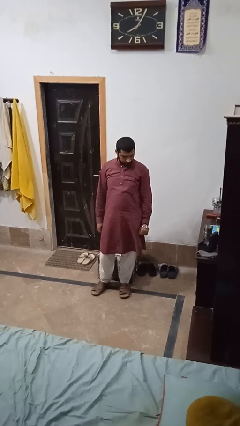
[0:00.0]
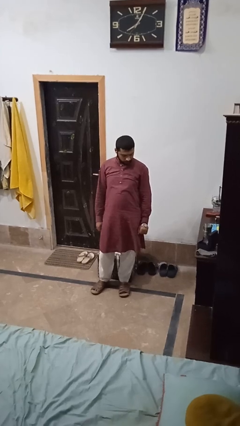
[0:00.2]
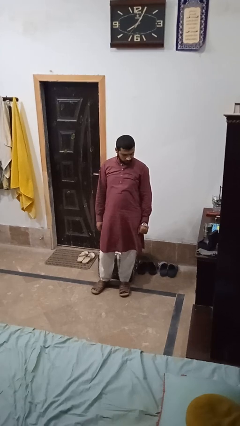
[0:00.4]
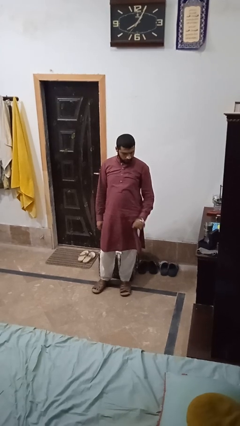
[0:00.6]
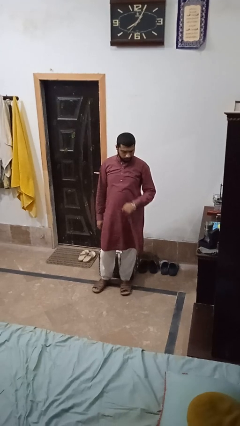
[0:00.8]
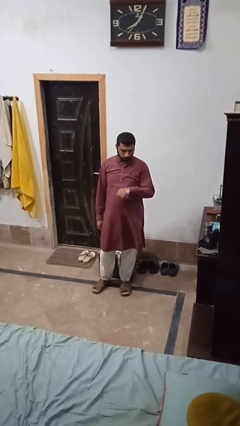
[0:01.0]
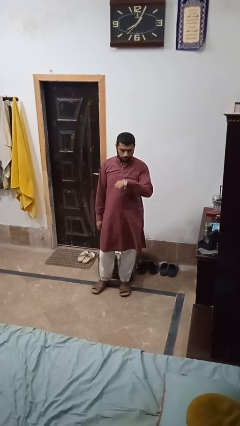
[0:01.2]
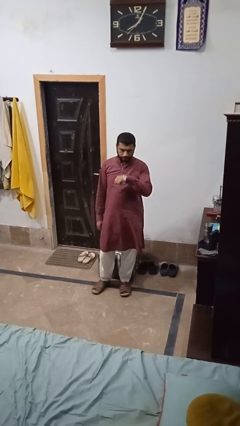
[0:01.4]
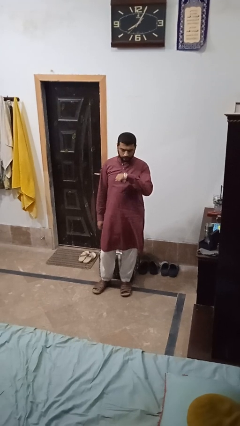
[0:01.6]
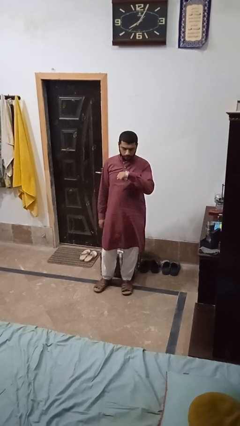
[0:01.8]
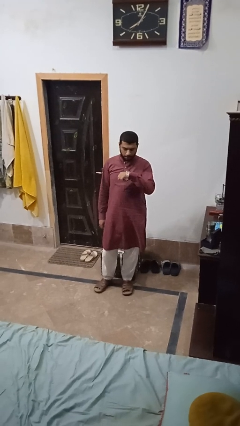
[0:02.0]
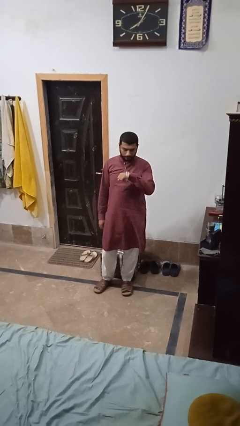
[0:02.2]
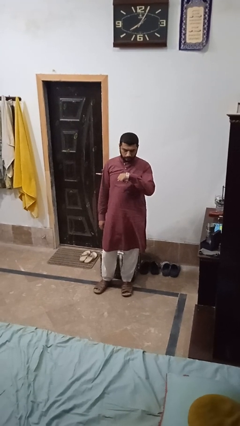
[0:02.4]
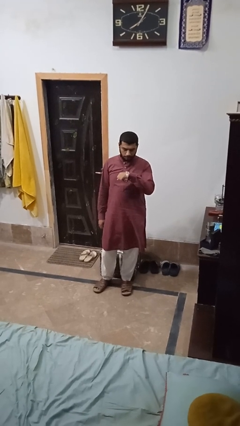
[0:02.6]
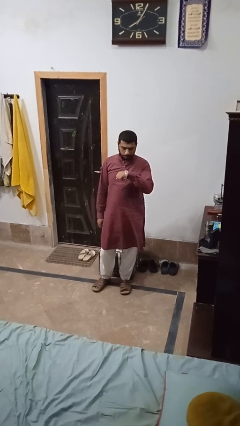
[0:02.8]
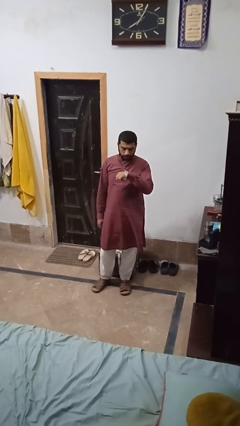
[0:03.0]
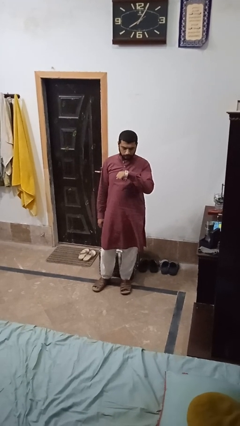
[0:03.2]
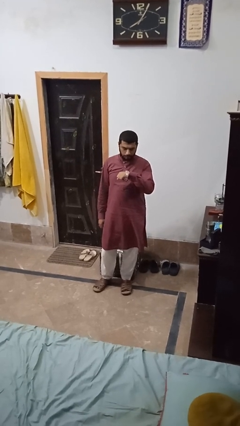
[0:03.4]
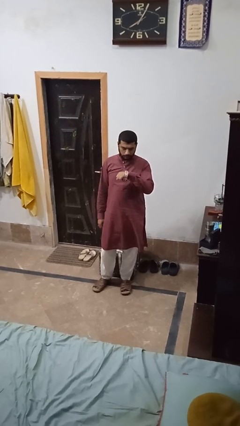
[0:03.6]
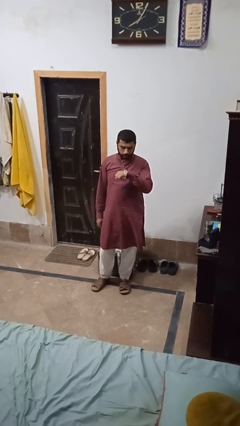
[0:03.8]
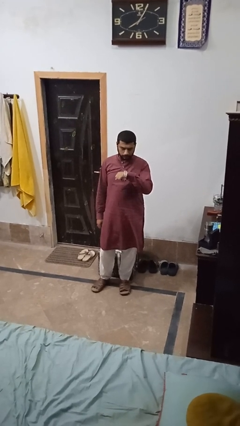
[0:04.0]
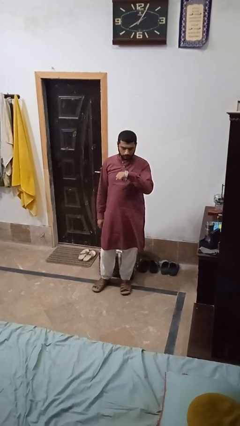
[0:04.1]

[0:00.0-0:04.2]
person looks at wristwatch

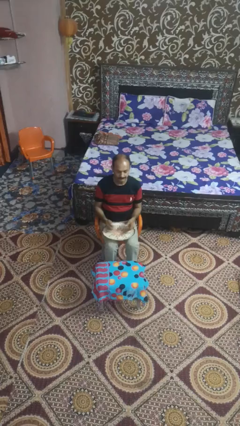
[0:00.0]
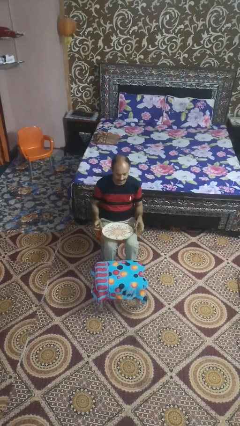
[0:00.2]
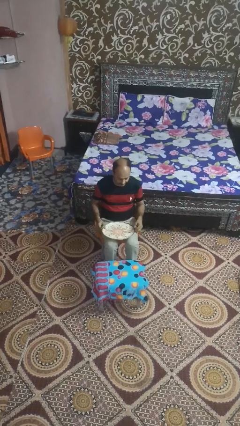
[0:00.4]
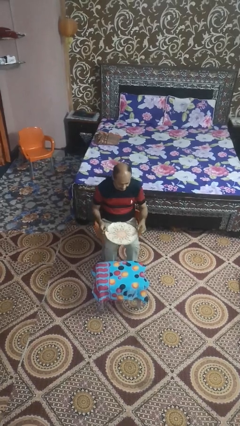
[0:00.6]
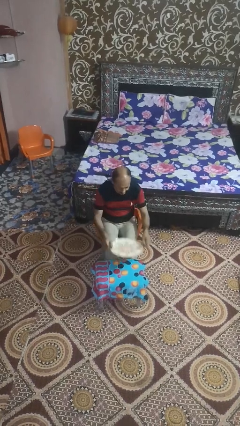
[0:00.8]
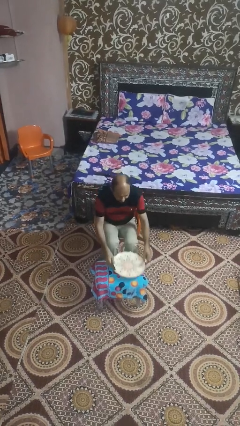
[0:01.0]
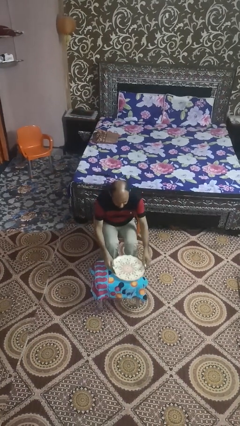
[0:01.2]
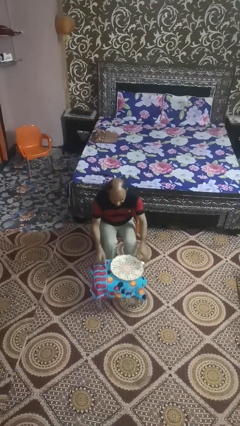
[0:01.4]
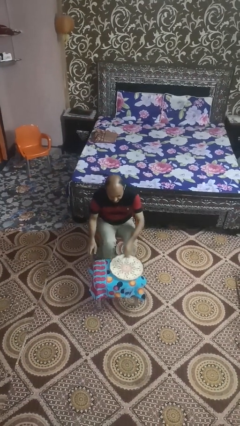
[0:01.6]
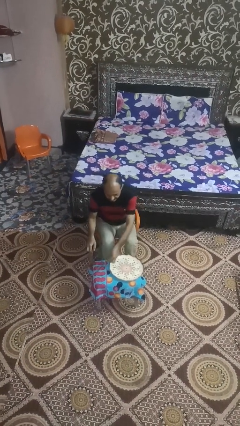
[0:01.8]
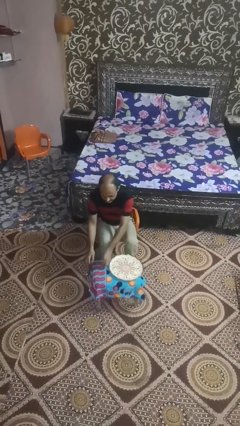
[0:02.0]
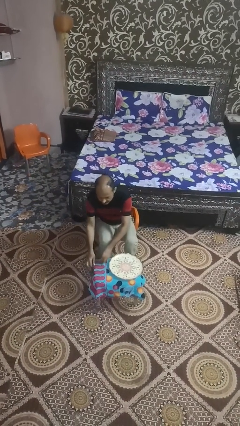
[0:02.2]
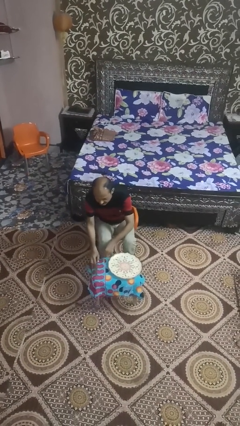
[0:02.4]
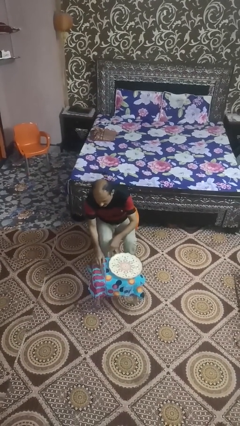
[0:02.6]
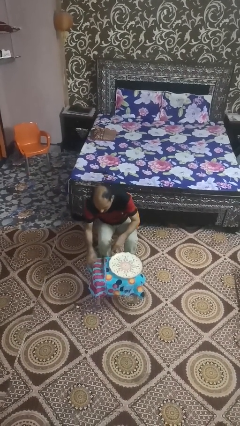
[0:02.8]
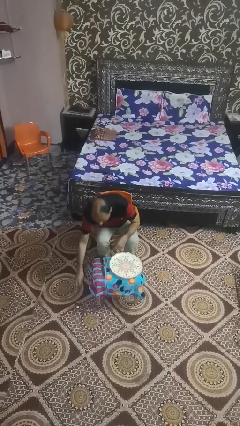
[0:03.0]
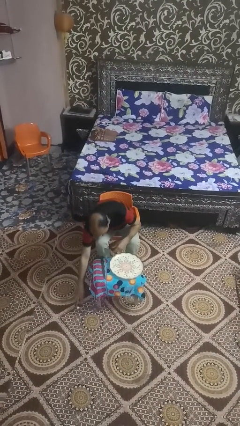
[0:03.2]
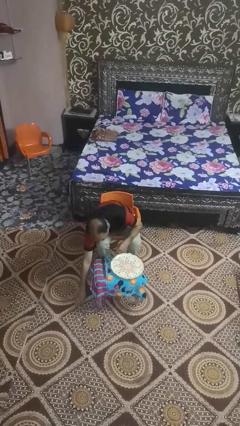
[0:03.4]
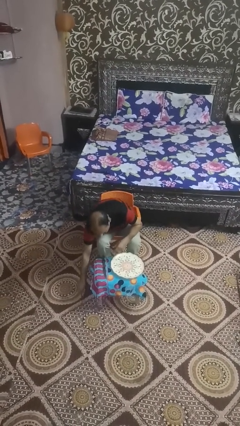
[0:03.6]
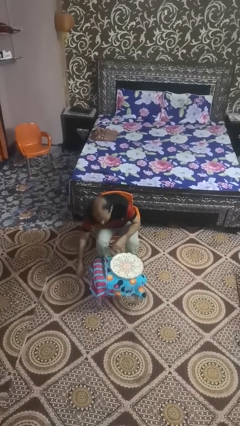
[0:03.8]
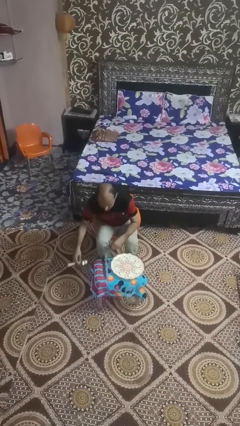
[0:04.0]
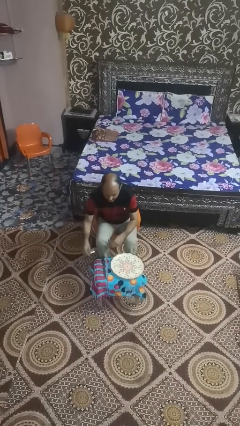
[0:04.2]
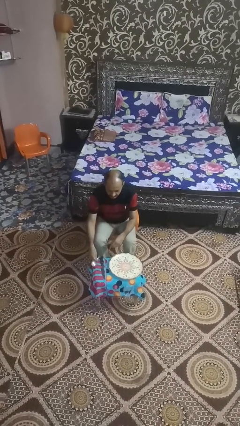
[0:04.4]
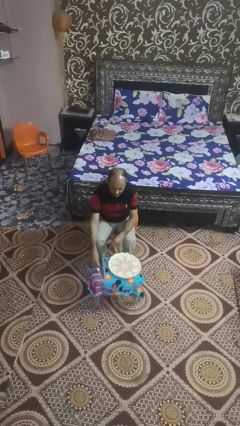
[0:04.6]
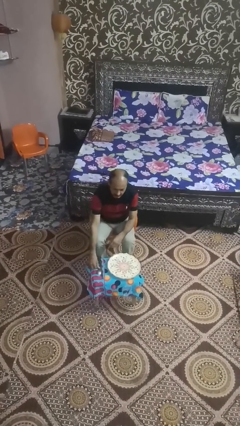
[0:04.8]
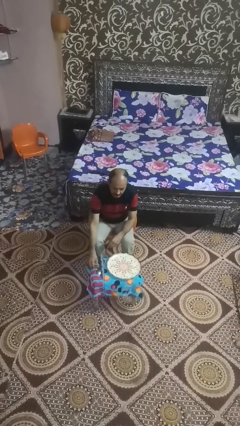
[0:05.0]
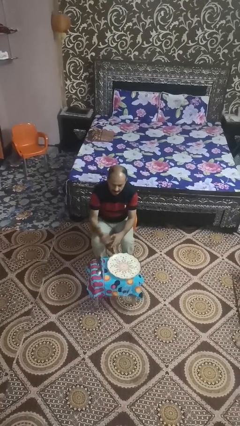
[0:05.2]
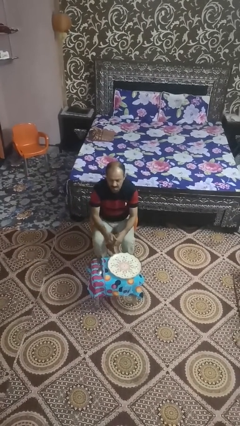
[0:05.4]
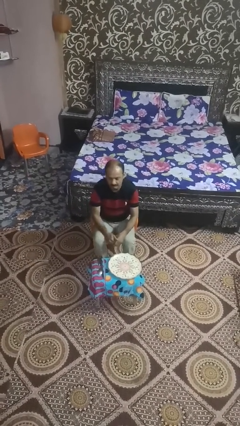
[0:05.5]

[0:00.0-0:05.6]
person sets table

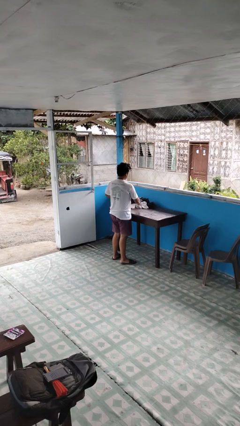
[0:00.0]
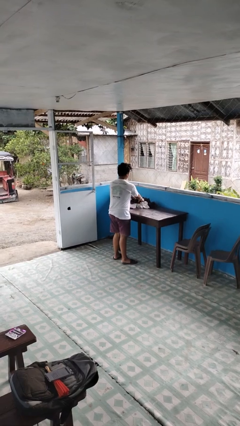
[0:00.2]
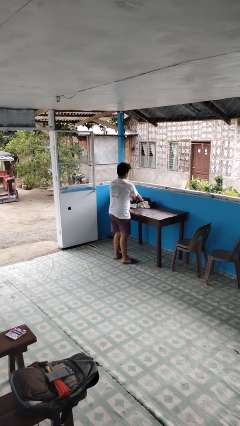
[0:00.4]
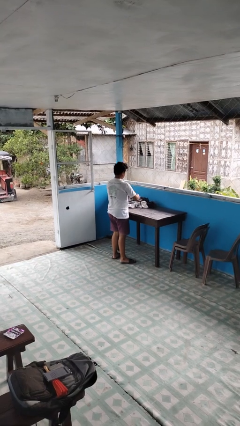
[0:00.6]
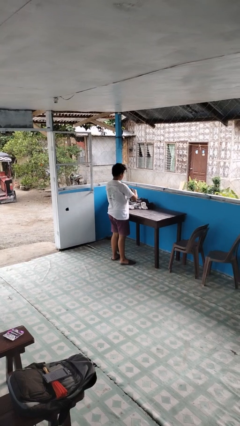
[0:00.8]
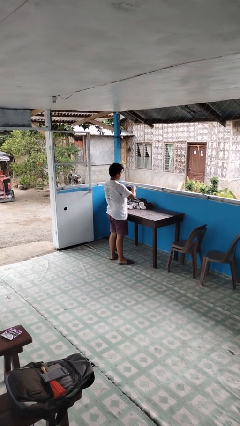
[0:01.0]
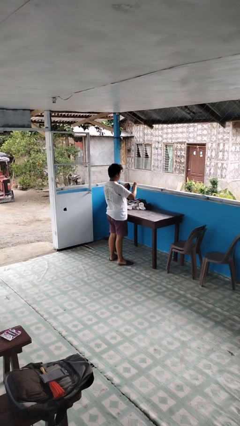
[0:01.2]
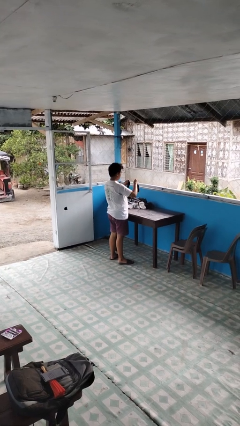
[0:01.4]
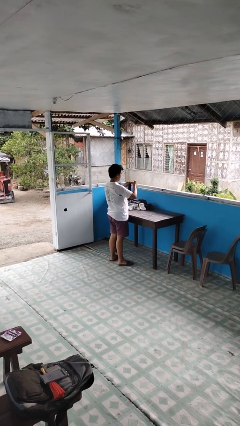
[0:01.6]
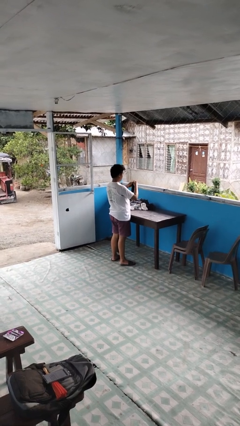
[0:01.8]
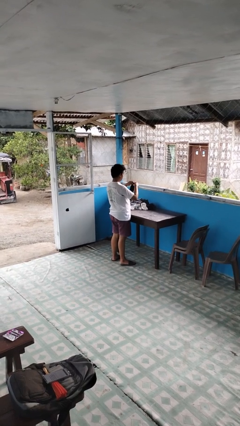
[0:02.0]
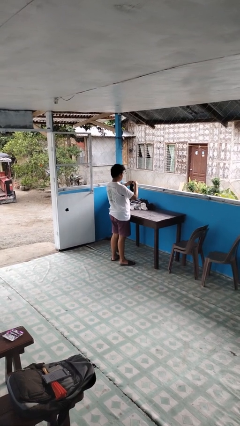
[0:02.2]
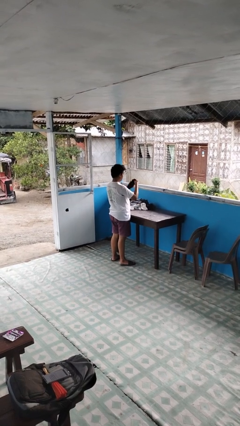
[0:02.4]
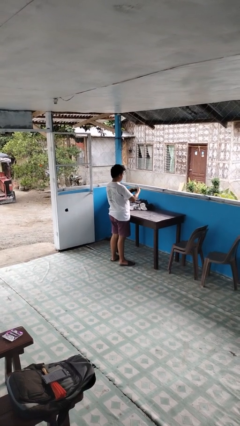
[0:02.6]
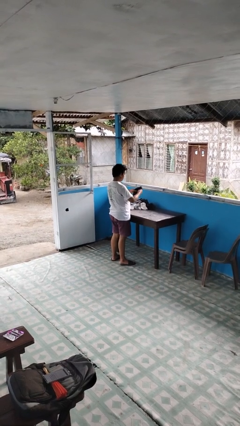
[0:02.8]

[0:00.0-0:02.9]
person folds socks

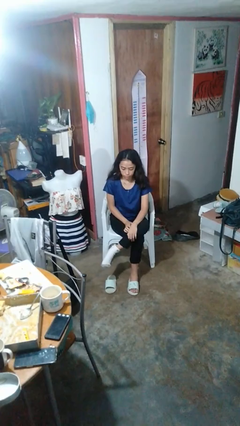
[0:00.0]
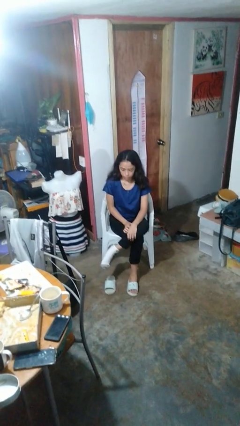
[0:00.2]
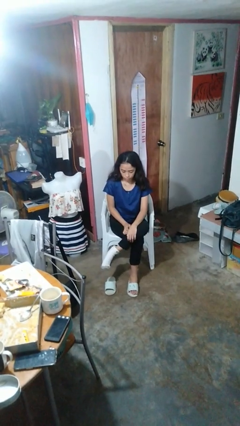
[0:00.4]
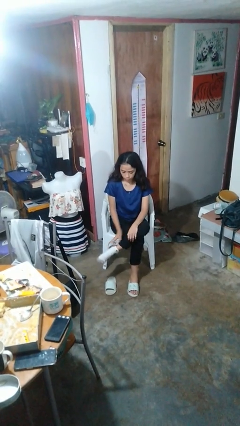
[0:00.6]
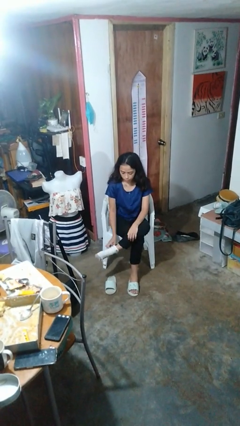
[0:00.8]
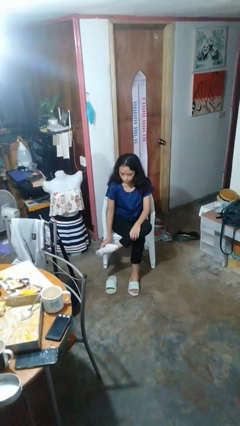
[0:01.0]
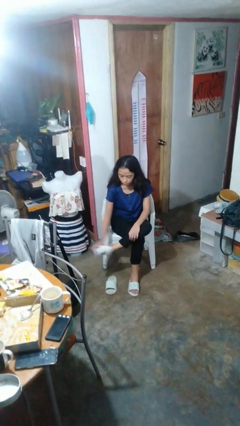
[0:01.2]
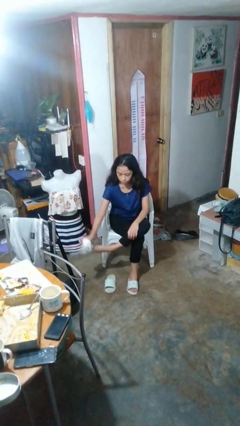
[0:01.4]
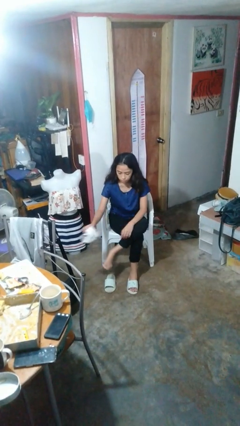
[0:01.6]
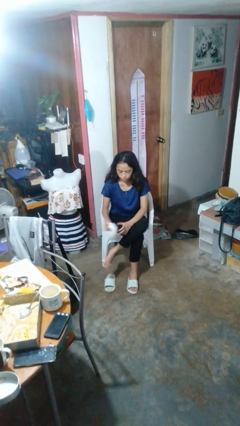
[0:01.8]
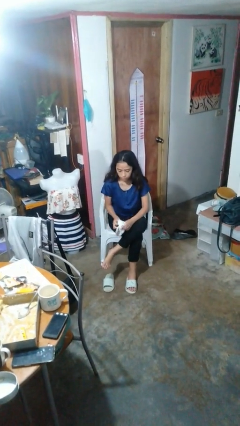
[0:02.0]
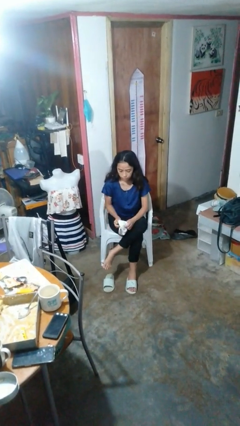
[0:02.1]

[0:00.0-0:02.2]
person takes off socks

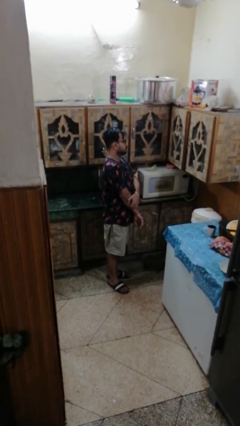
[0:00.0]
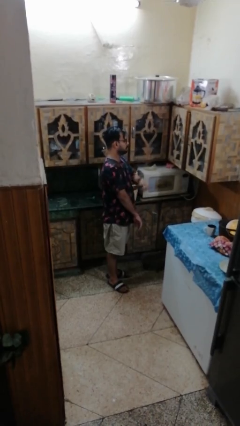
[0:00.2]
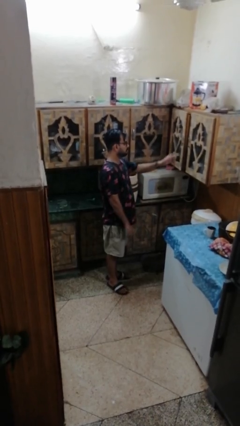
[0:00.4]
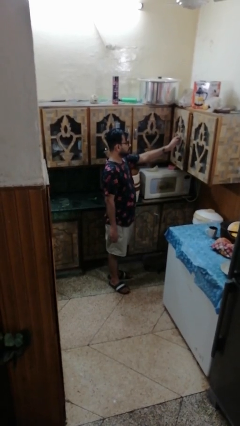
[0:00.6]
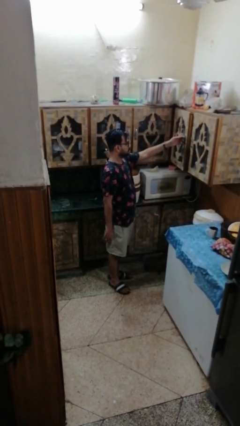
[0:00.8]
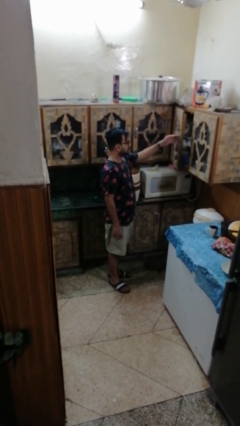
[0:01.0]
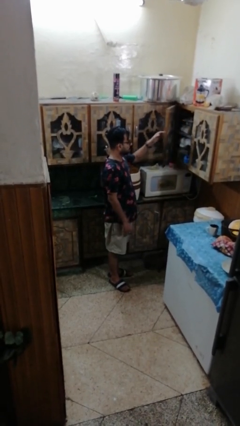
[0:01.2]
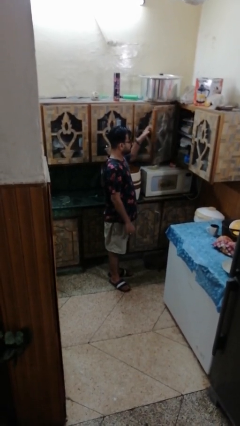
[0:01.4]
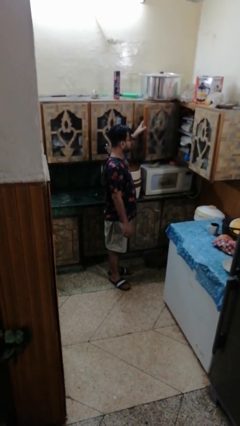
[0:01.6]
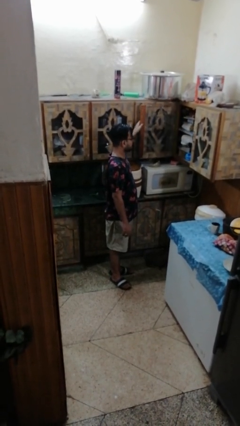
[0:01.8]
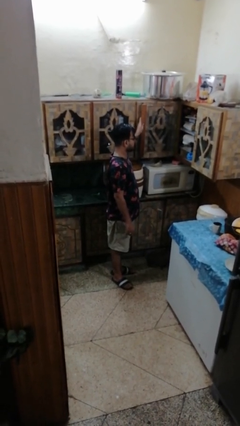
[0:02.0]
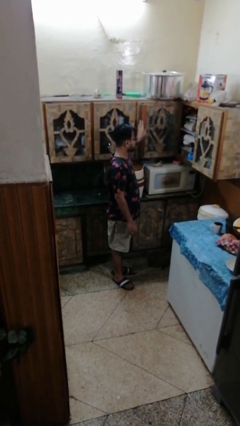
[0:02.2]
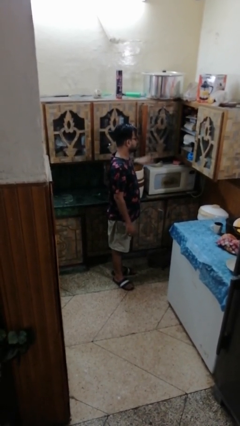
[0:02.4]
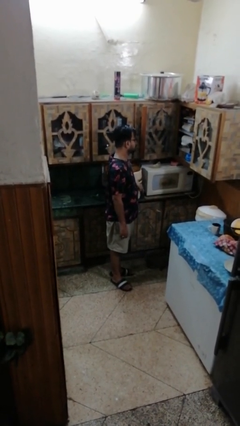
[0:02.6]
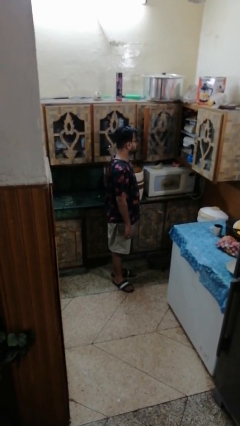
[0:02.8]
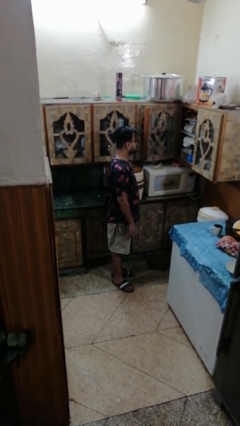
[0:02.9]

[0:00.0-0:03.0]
person opens cabinet
